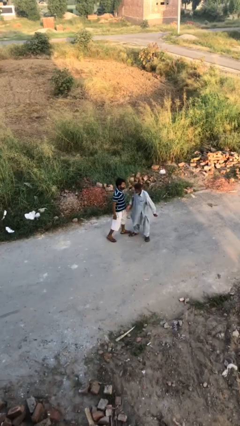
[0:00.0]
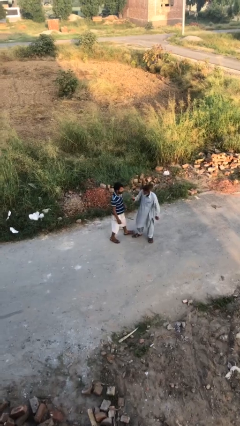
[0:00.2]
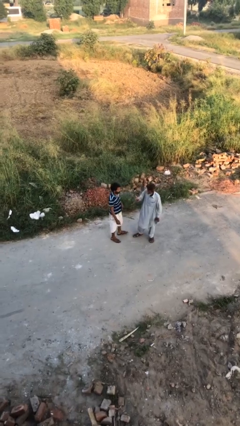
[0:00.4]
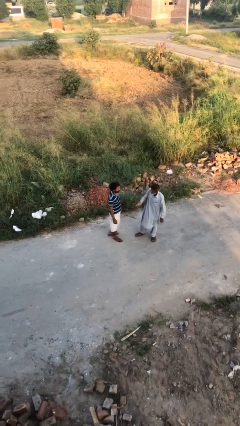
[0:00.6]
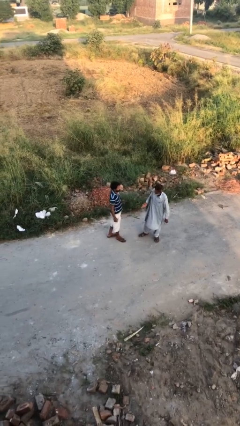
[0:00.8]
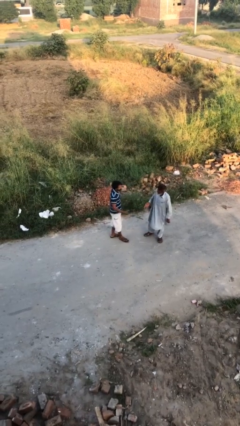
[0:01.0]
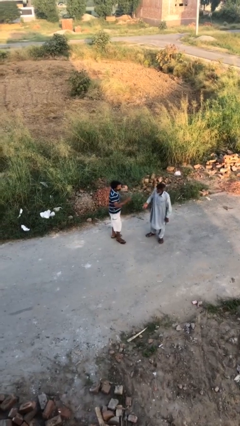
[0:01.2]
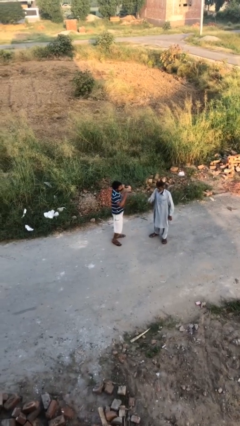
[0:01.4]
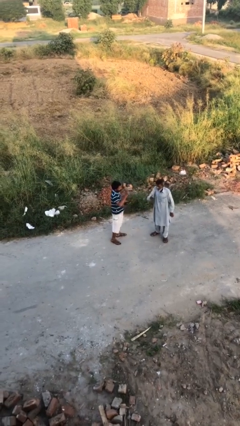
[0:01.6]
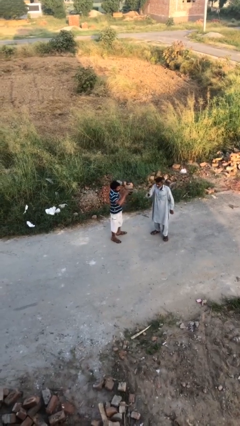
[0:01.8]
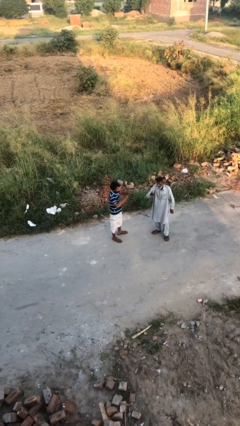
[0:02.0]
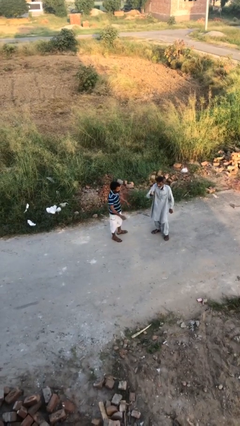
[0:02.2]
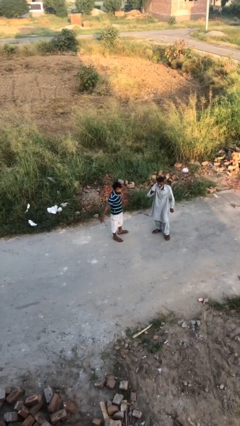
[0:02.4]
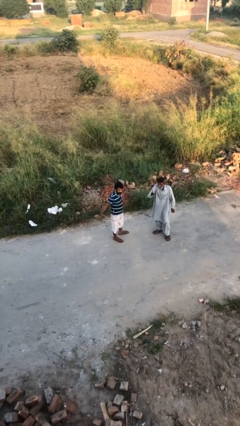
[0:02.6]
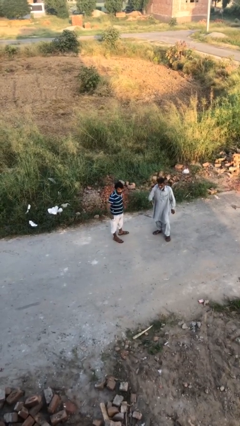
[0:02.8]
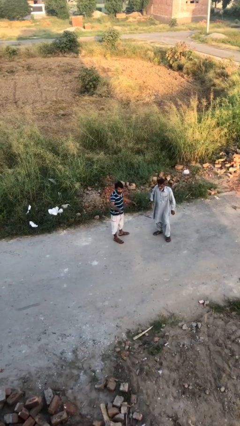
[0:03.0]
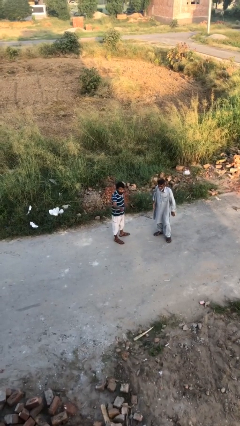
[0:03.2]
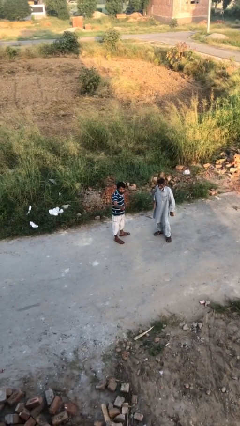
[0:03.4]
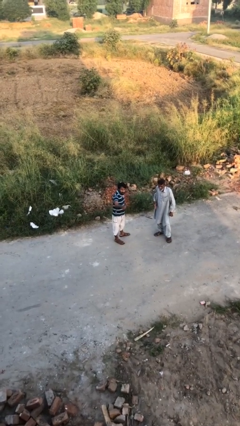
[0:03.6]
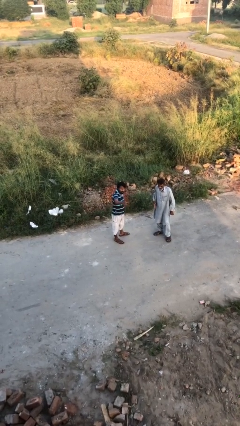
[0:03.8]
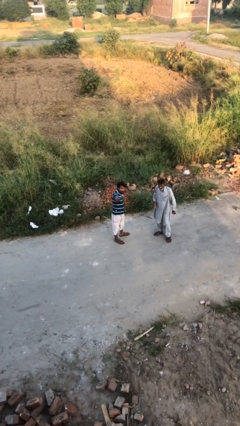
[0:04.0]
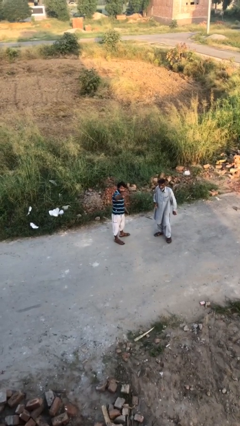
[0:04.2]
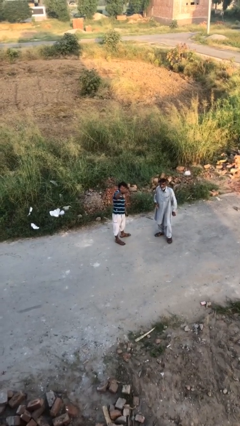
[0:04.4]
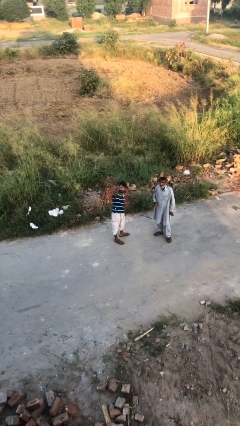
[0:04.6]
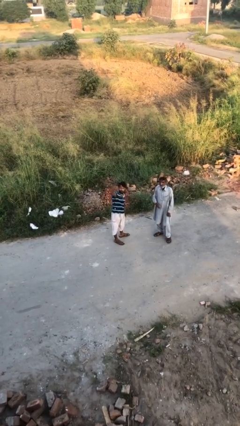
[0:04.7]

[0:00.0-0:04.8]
person talks to person

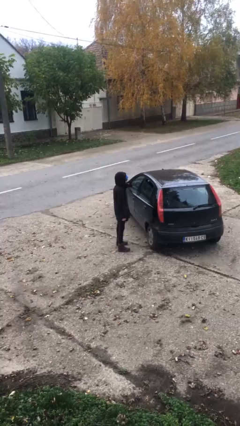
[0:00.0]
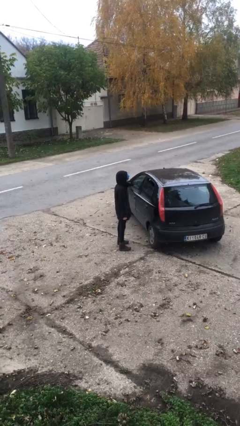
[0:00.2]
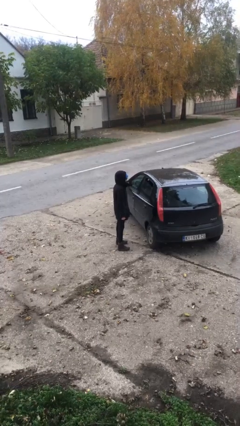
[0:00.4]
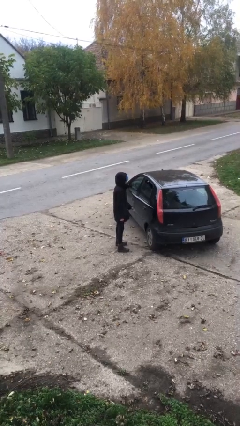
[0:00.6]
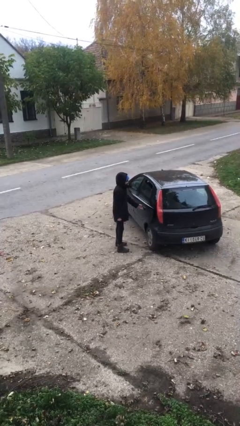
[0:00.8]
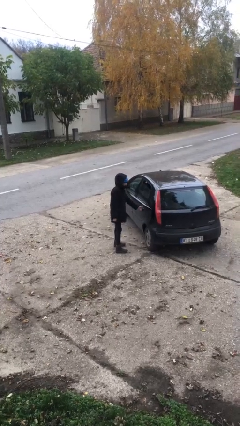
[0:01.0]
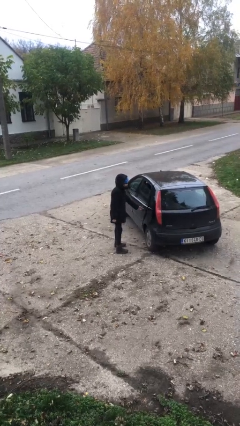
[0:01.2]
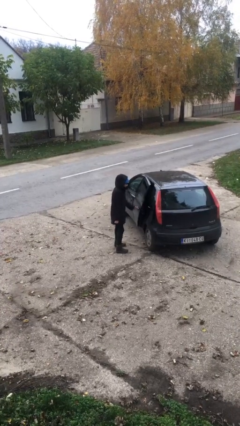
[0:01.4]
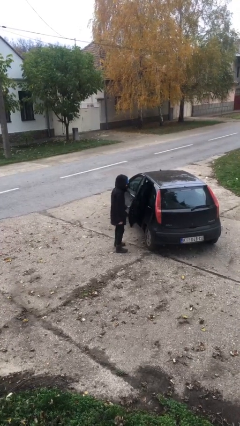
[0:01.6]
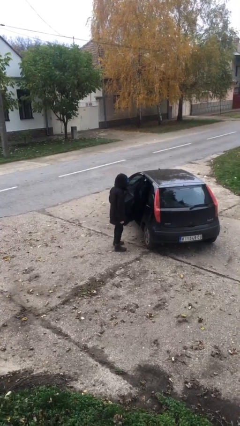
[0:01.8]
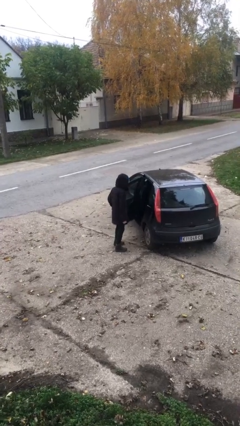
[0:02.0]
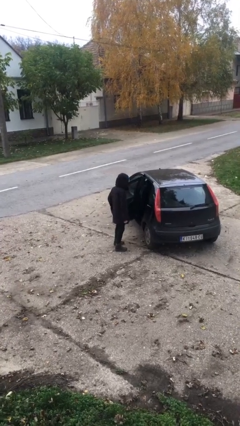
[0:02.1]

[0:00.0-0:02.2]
person opens car door

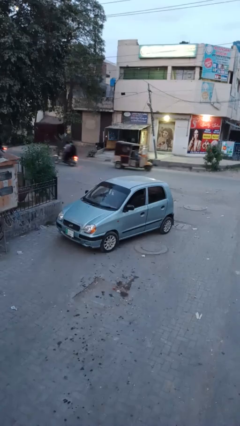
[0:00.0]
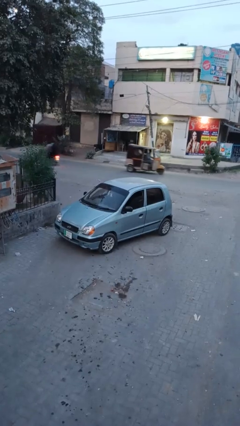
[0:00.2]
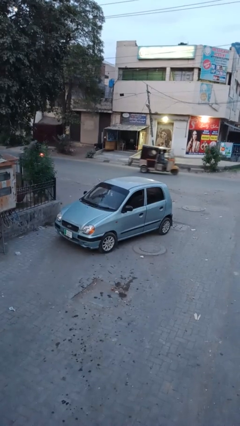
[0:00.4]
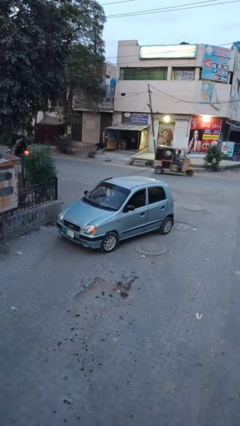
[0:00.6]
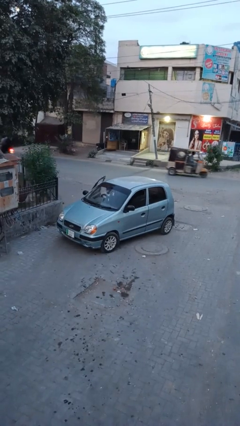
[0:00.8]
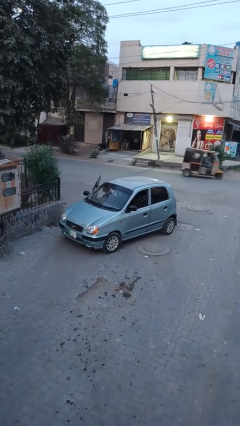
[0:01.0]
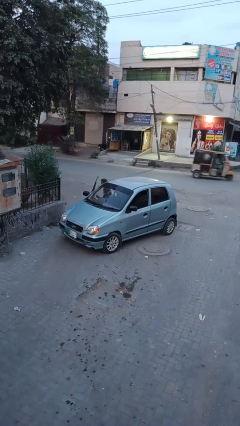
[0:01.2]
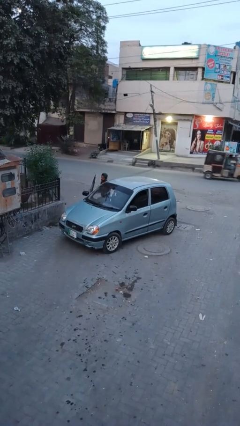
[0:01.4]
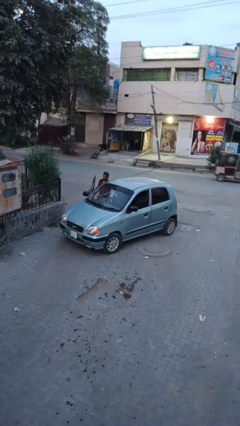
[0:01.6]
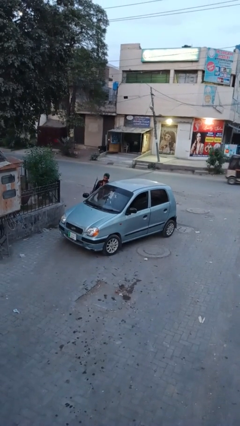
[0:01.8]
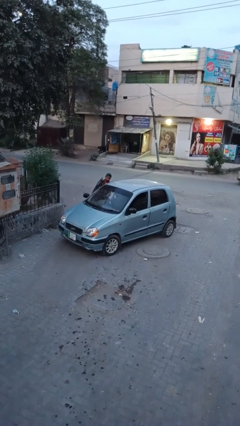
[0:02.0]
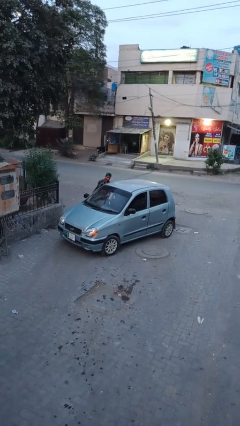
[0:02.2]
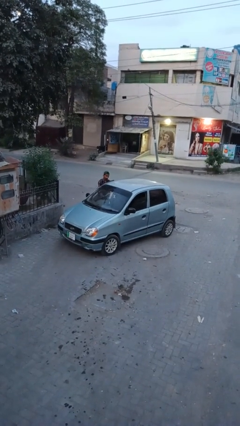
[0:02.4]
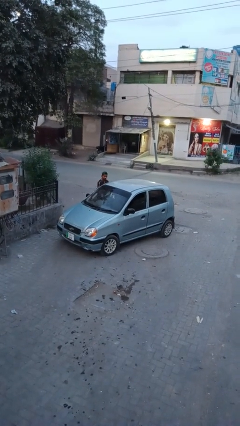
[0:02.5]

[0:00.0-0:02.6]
car drops off person

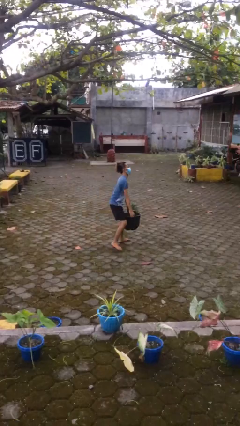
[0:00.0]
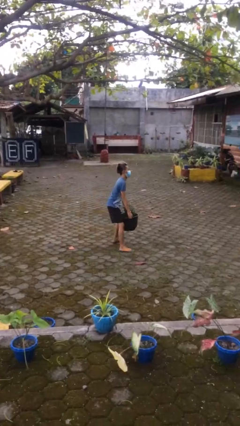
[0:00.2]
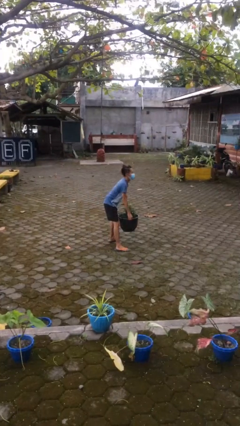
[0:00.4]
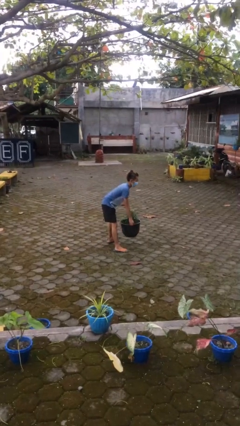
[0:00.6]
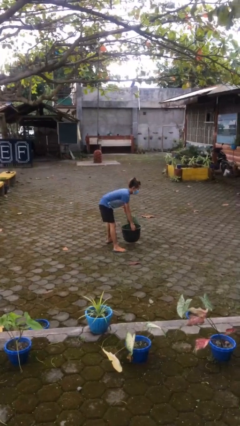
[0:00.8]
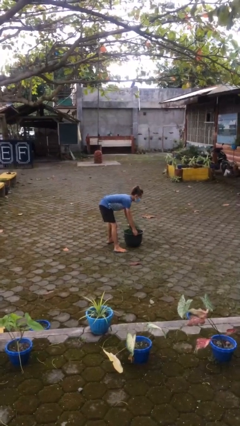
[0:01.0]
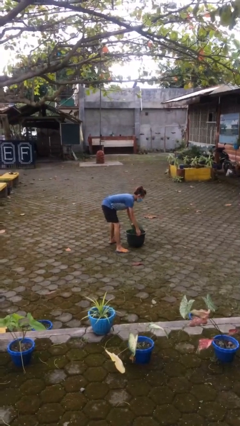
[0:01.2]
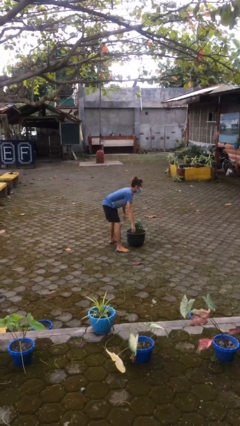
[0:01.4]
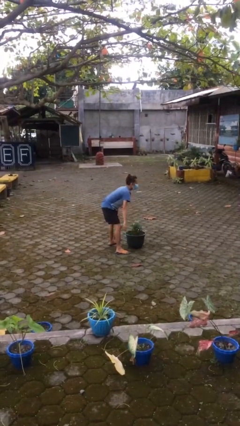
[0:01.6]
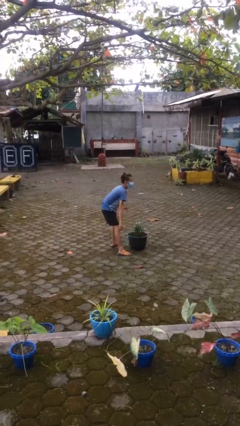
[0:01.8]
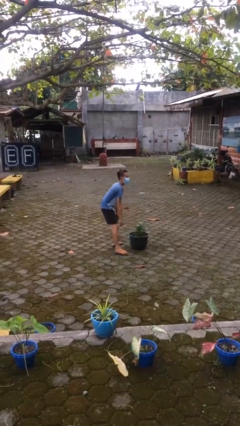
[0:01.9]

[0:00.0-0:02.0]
person puts down object on floor

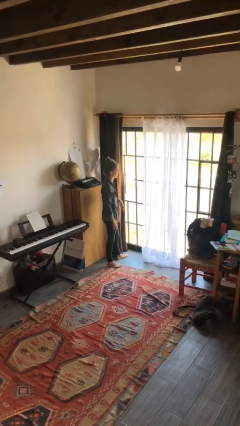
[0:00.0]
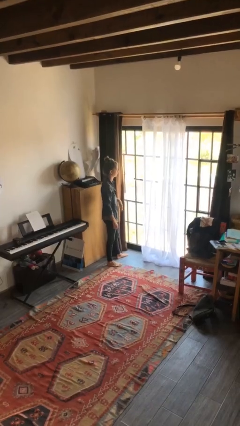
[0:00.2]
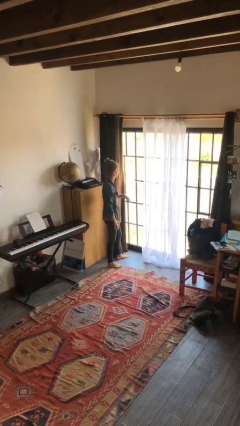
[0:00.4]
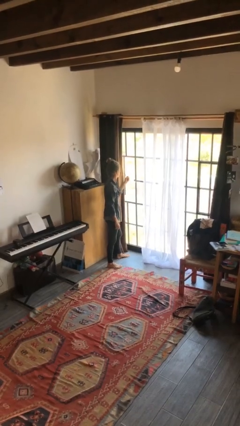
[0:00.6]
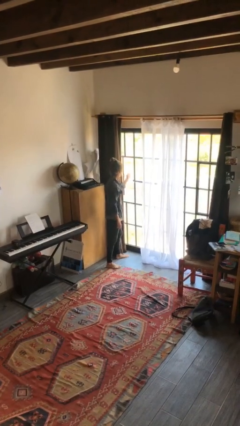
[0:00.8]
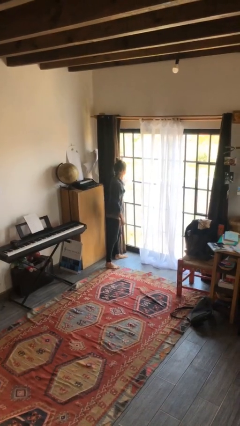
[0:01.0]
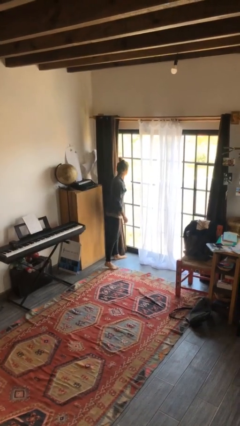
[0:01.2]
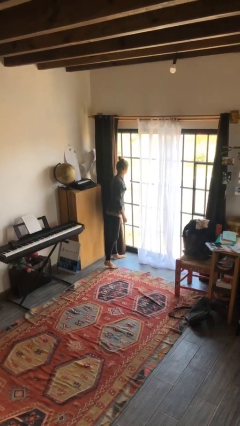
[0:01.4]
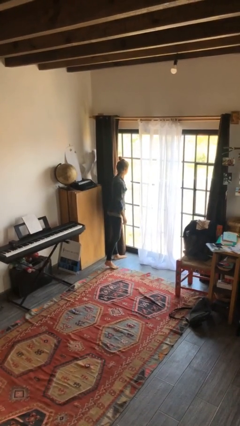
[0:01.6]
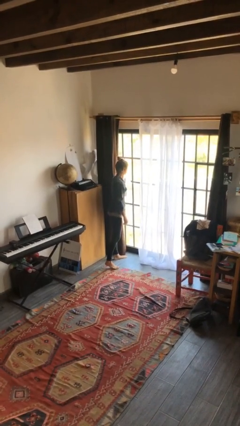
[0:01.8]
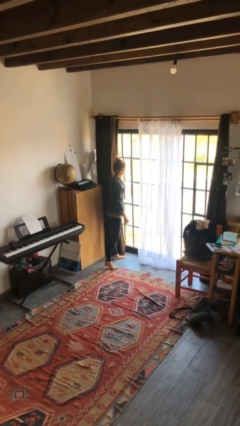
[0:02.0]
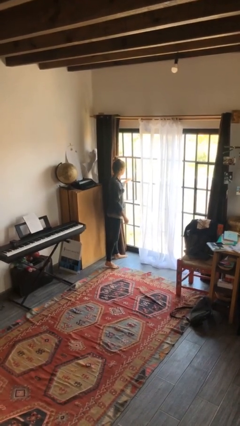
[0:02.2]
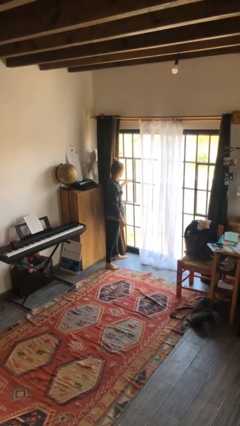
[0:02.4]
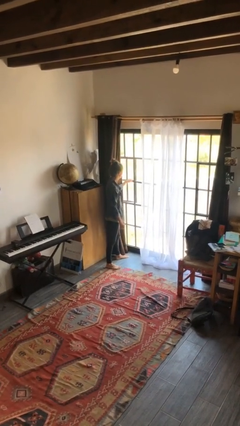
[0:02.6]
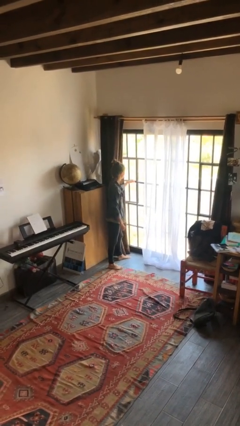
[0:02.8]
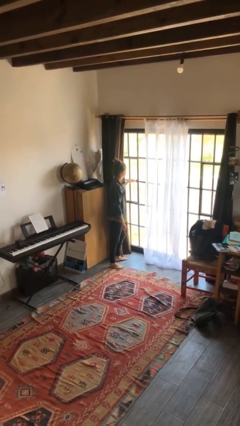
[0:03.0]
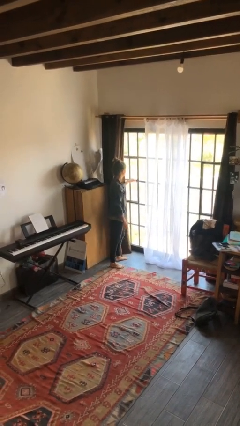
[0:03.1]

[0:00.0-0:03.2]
person closes home window

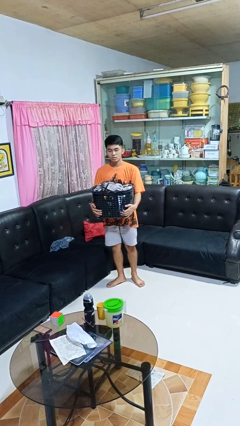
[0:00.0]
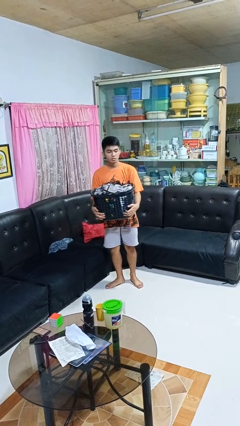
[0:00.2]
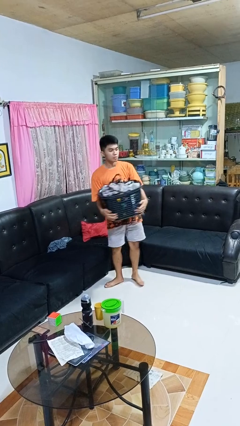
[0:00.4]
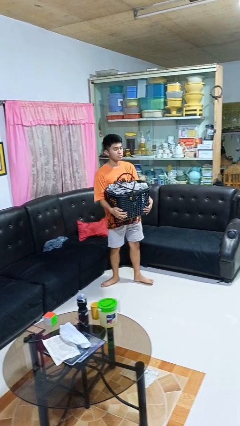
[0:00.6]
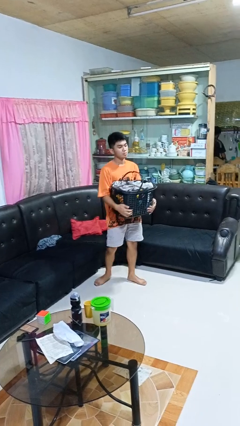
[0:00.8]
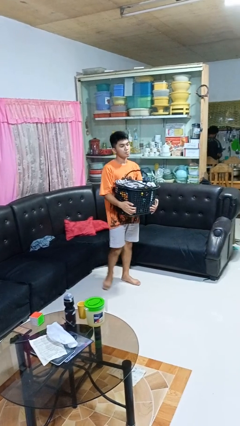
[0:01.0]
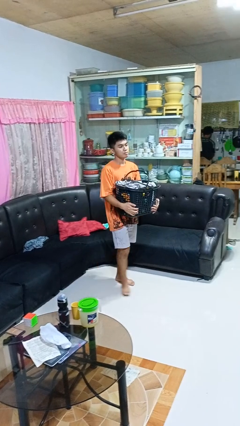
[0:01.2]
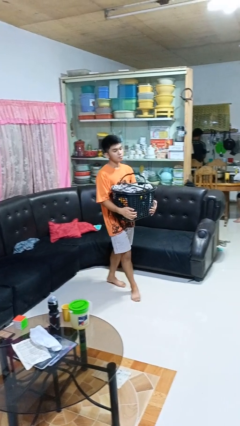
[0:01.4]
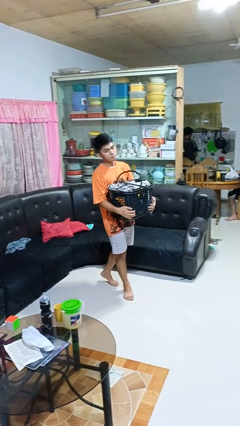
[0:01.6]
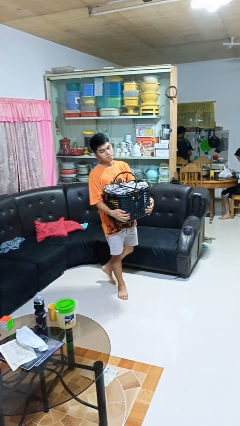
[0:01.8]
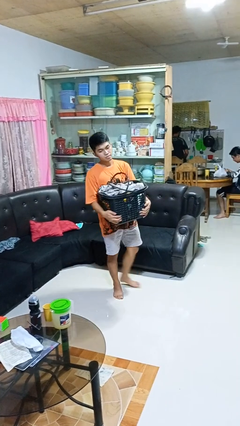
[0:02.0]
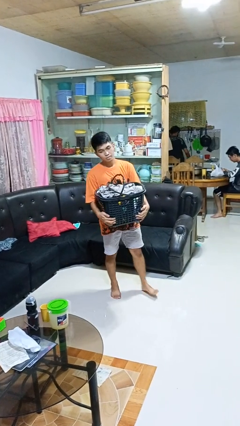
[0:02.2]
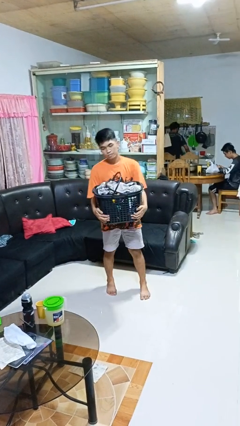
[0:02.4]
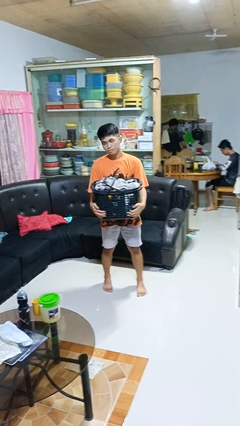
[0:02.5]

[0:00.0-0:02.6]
person carries laundry basket
